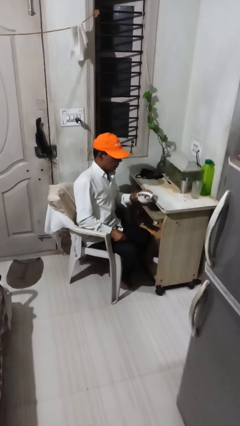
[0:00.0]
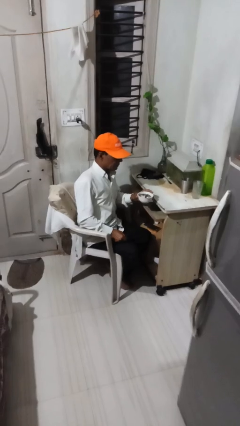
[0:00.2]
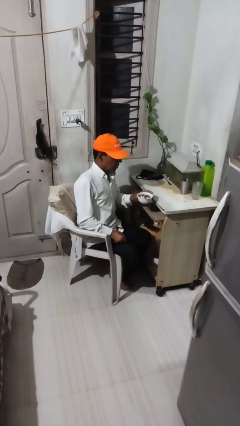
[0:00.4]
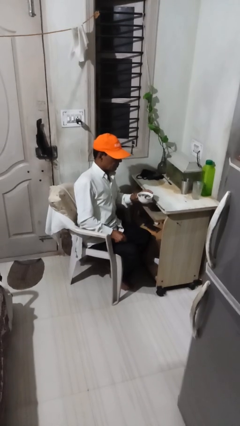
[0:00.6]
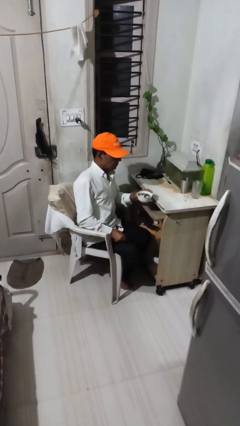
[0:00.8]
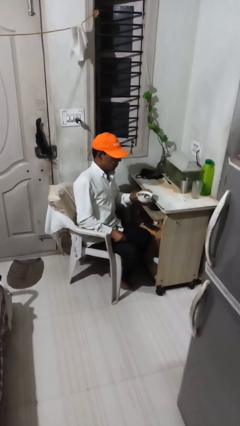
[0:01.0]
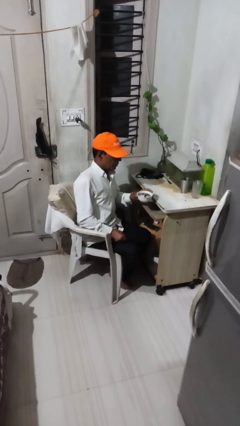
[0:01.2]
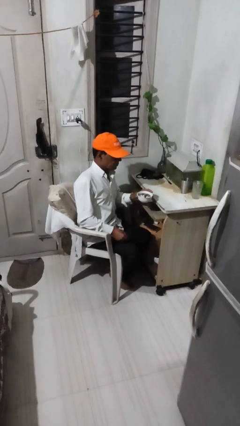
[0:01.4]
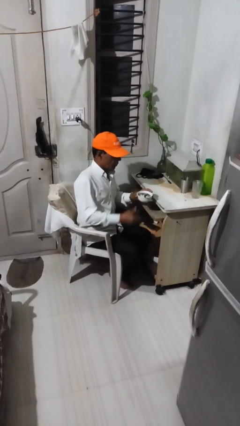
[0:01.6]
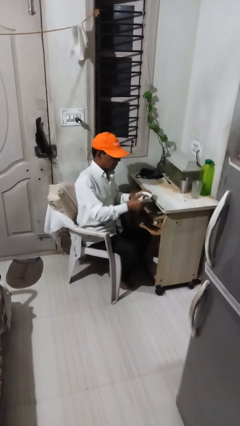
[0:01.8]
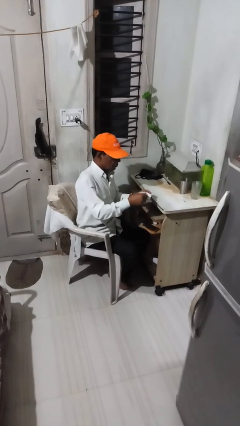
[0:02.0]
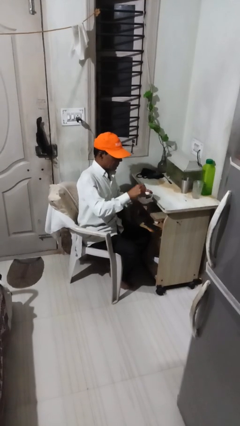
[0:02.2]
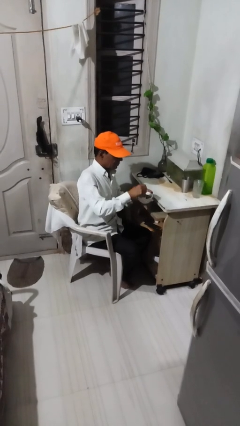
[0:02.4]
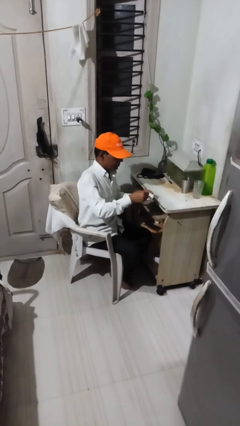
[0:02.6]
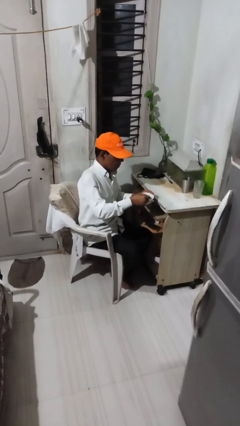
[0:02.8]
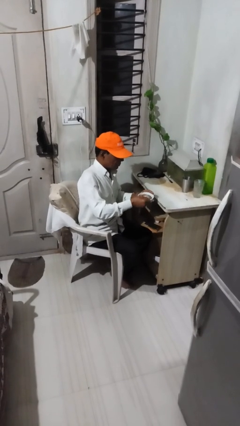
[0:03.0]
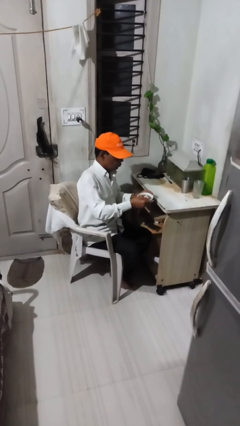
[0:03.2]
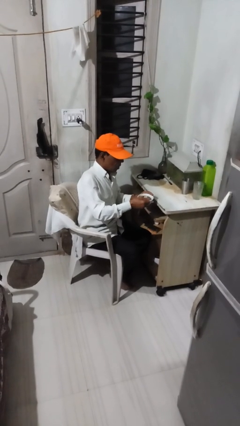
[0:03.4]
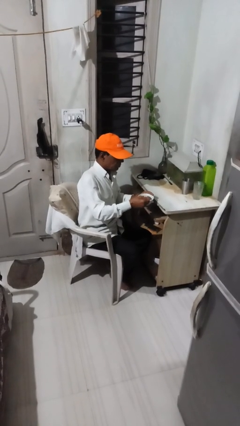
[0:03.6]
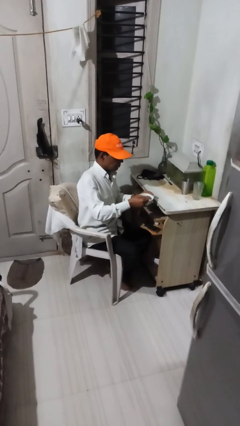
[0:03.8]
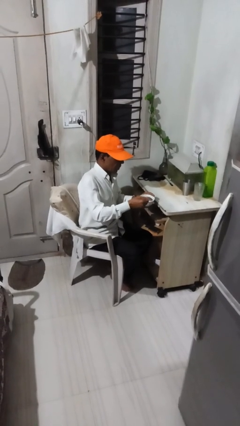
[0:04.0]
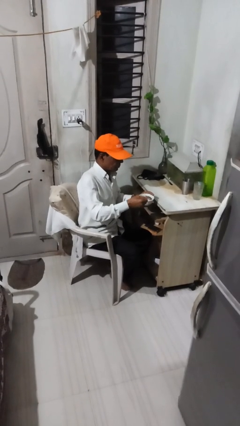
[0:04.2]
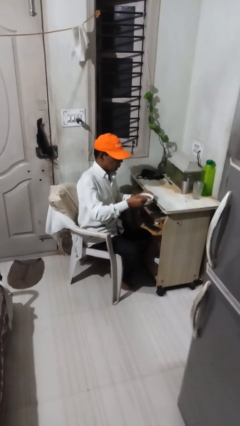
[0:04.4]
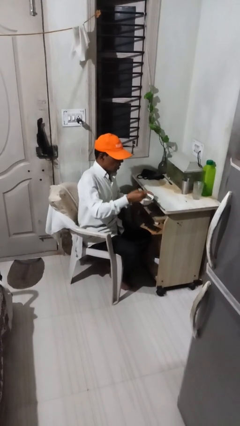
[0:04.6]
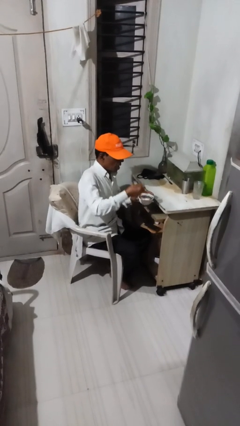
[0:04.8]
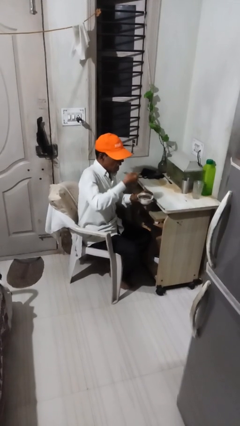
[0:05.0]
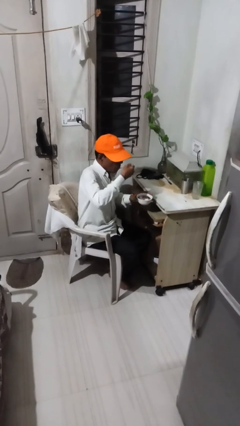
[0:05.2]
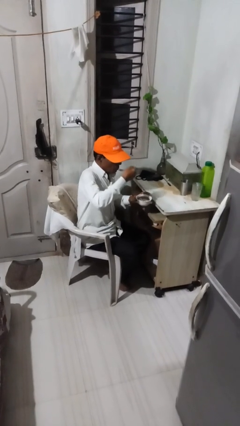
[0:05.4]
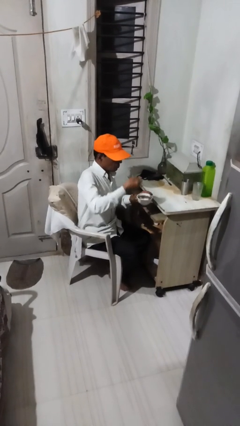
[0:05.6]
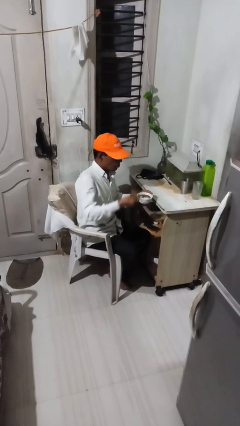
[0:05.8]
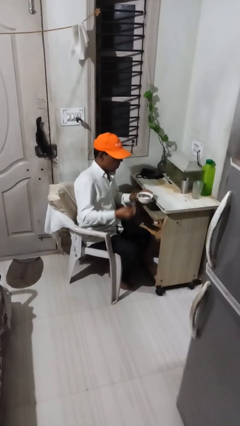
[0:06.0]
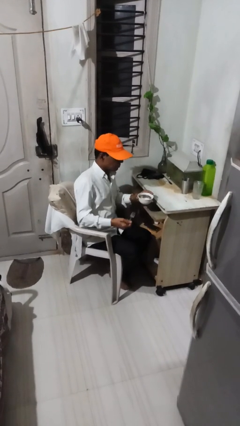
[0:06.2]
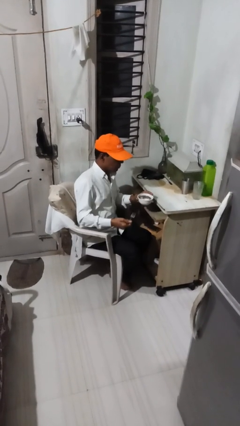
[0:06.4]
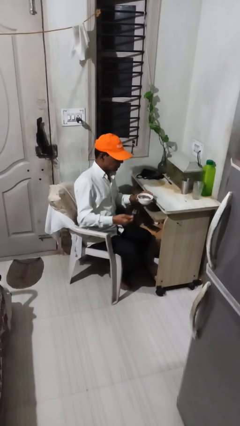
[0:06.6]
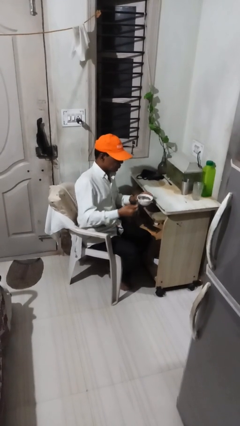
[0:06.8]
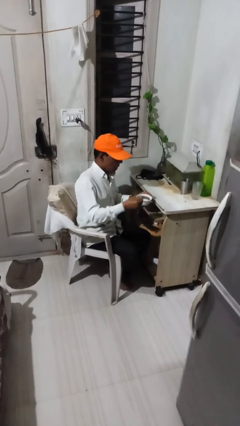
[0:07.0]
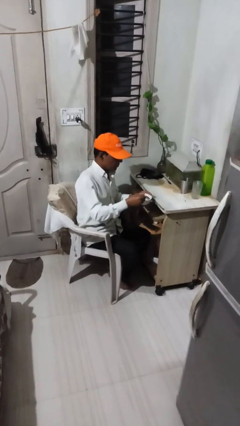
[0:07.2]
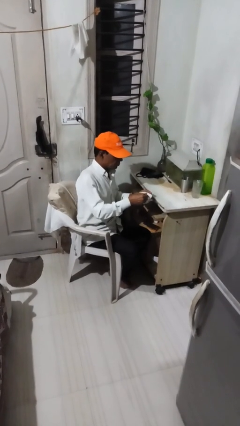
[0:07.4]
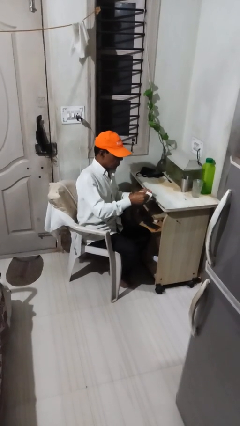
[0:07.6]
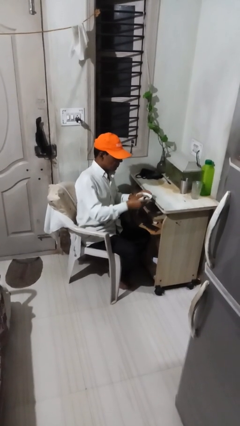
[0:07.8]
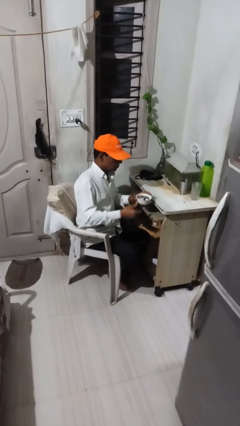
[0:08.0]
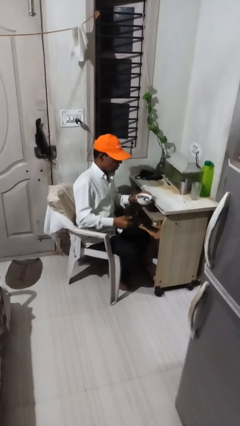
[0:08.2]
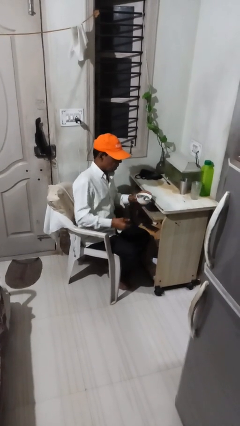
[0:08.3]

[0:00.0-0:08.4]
person eats with utensil

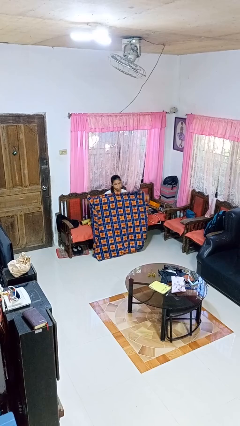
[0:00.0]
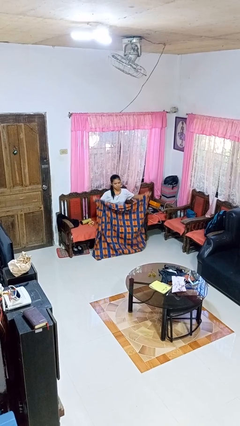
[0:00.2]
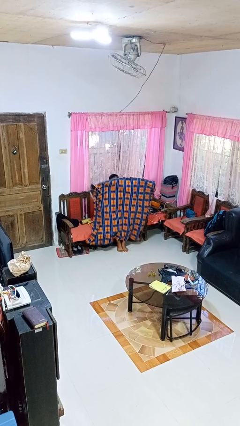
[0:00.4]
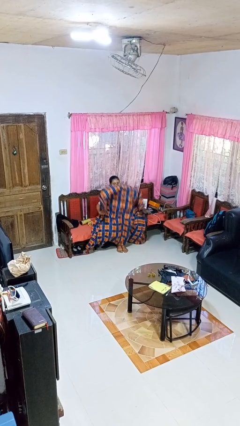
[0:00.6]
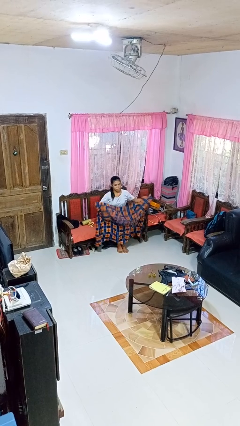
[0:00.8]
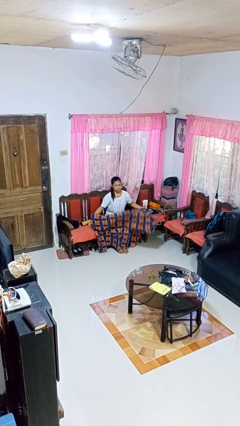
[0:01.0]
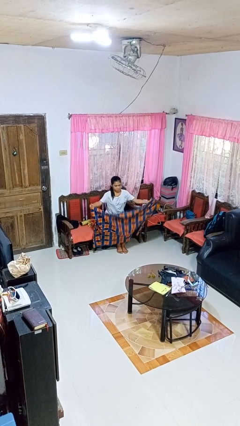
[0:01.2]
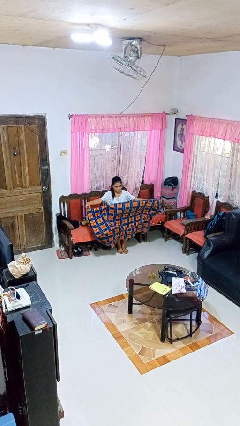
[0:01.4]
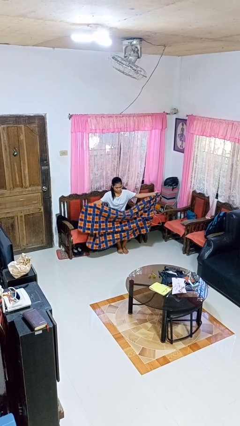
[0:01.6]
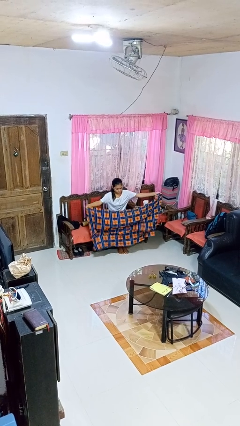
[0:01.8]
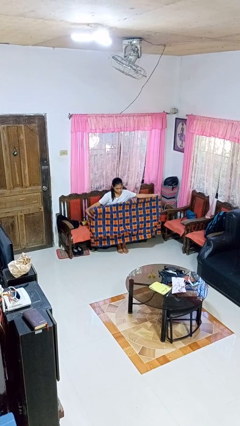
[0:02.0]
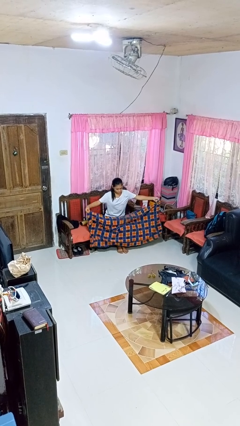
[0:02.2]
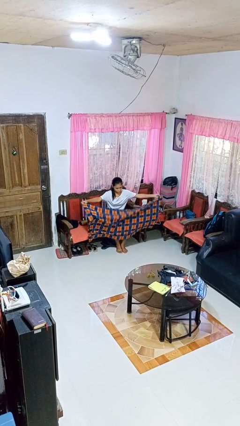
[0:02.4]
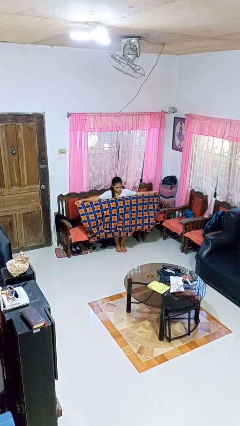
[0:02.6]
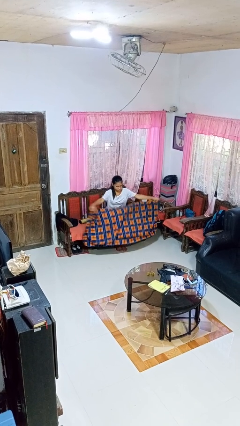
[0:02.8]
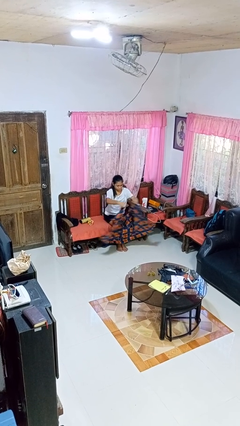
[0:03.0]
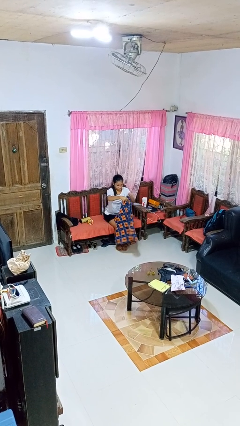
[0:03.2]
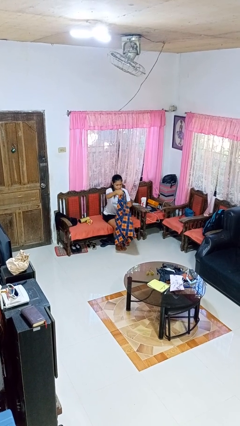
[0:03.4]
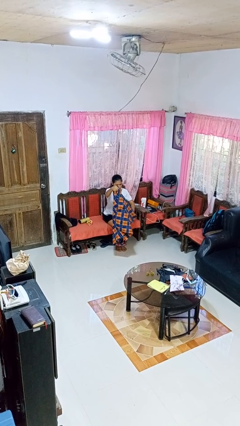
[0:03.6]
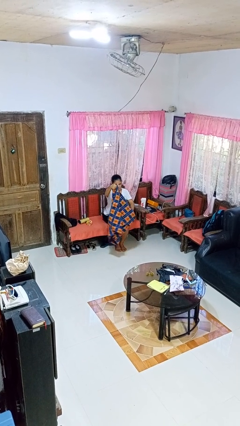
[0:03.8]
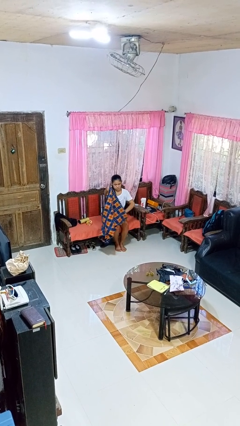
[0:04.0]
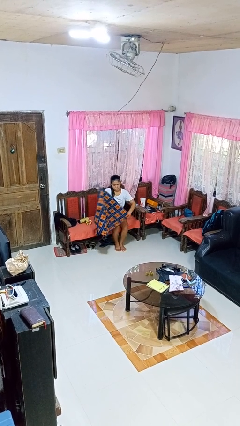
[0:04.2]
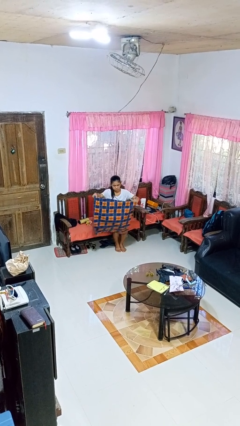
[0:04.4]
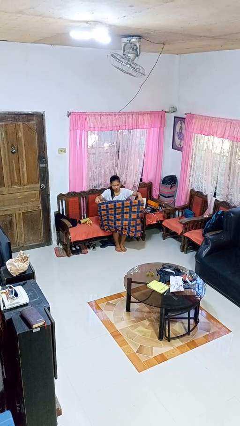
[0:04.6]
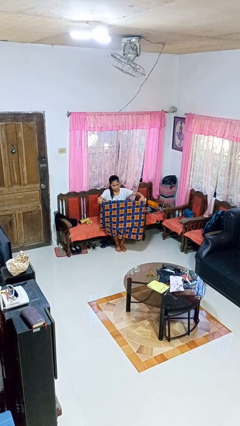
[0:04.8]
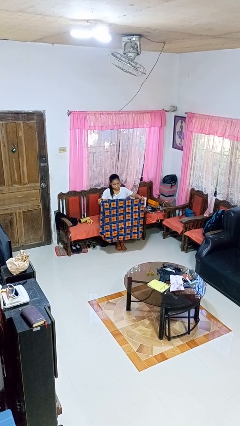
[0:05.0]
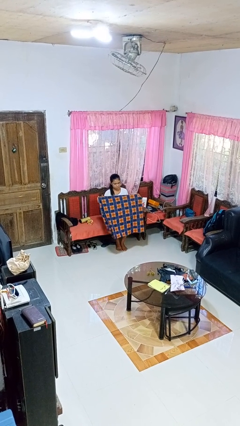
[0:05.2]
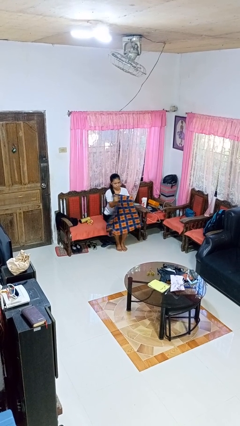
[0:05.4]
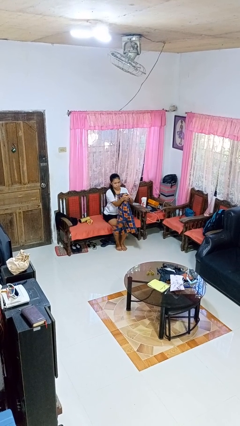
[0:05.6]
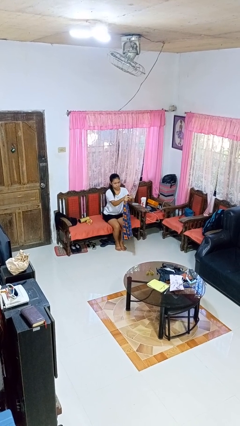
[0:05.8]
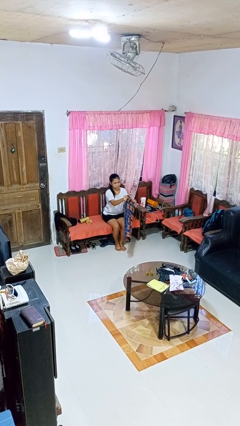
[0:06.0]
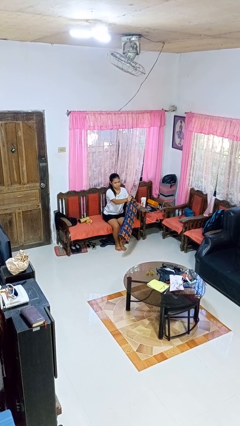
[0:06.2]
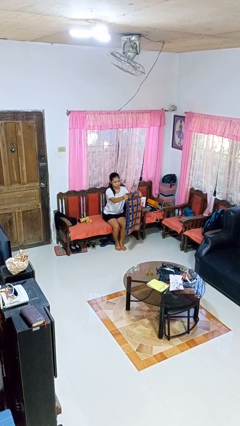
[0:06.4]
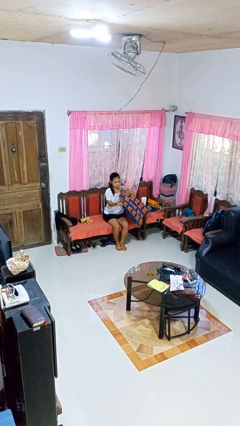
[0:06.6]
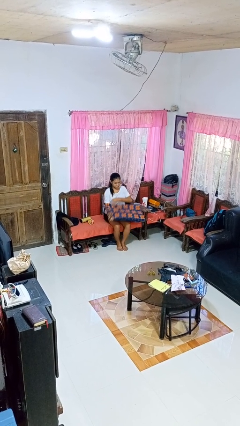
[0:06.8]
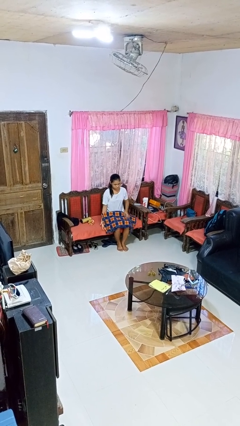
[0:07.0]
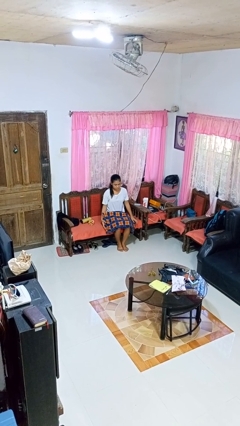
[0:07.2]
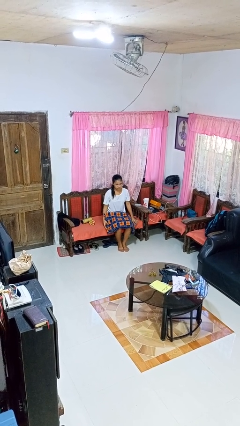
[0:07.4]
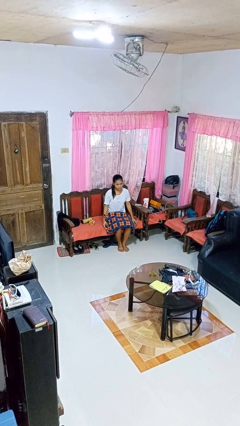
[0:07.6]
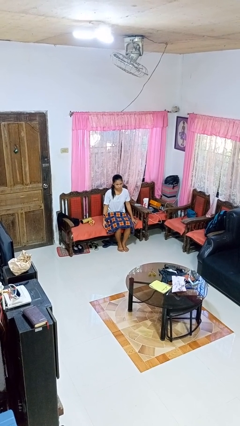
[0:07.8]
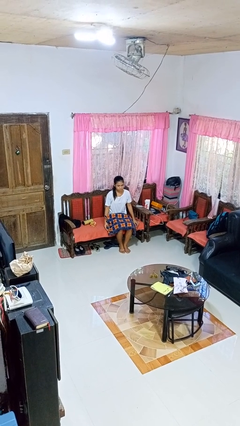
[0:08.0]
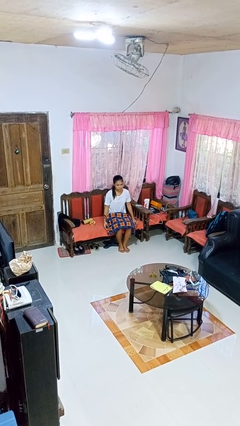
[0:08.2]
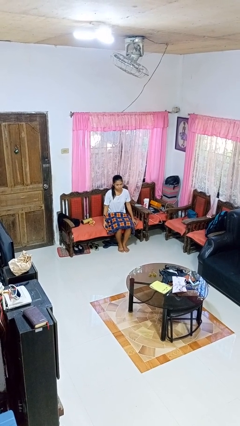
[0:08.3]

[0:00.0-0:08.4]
person folds blanket

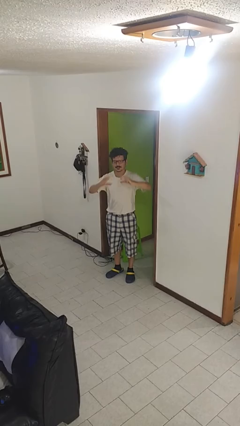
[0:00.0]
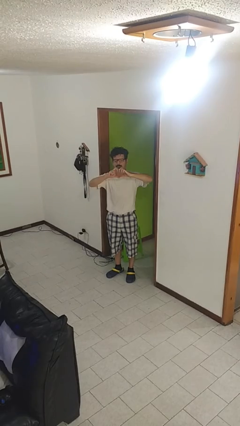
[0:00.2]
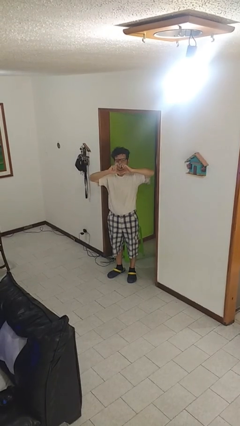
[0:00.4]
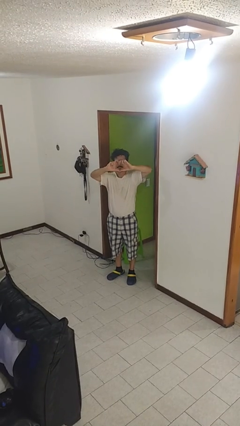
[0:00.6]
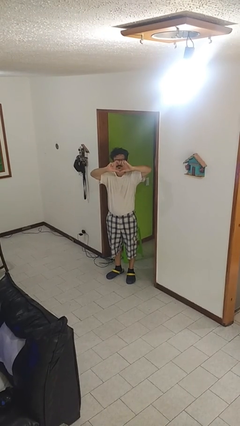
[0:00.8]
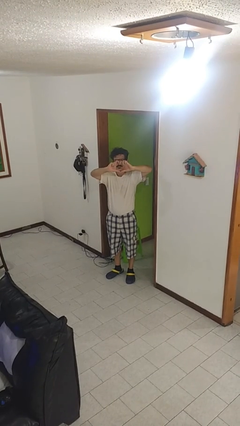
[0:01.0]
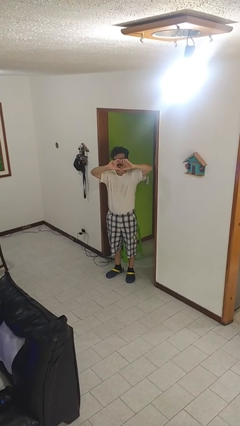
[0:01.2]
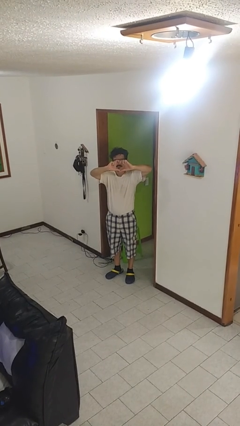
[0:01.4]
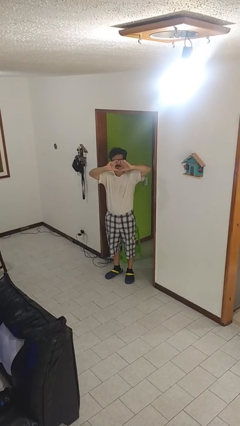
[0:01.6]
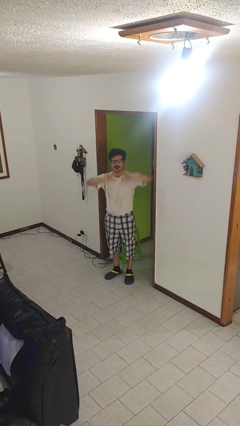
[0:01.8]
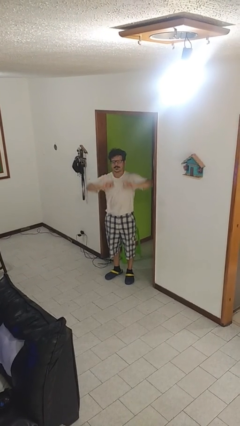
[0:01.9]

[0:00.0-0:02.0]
person gestures heart
